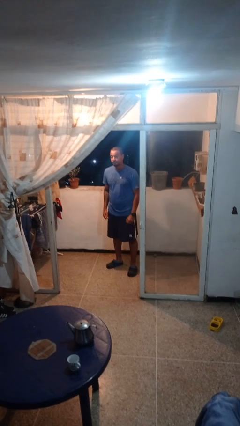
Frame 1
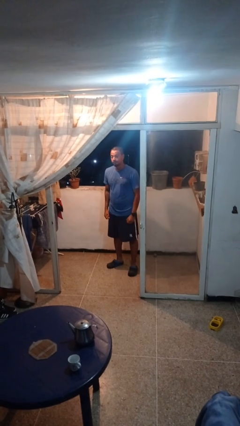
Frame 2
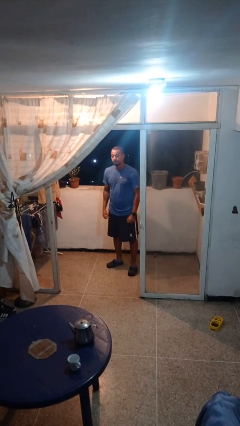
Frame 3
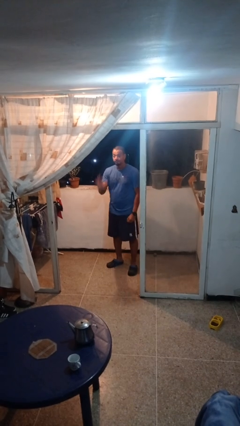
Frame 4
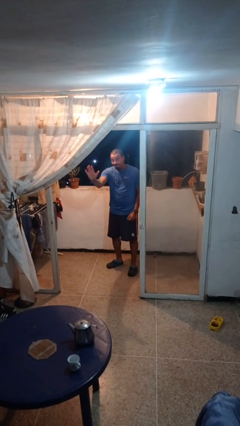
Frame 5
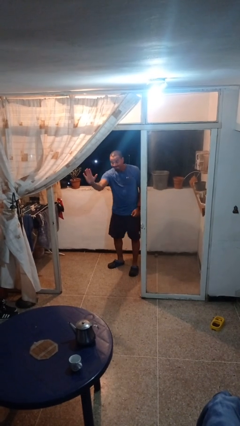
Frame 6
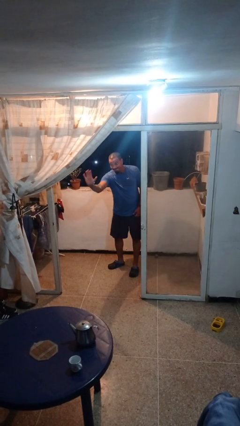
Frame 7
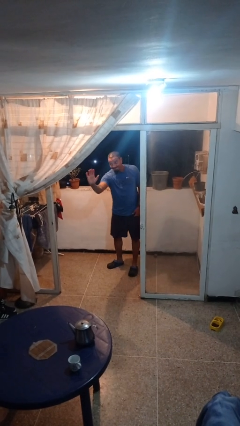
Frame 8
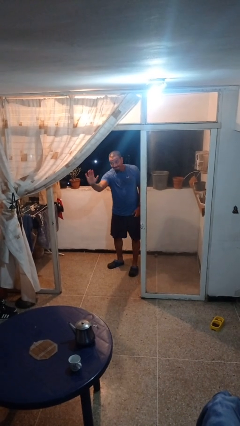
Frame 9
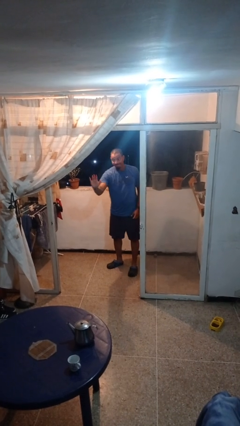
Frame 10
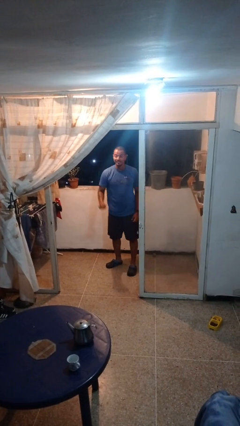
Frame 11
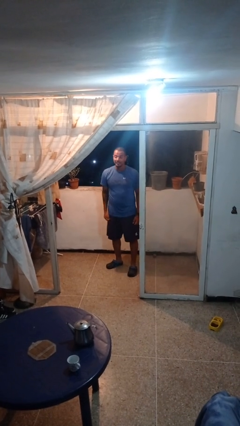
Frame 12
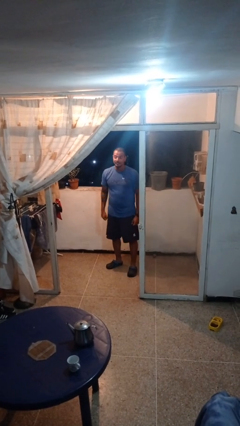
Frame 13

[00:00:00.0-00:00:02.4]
person gestures stop

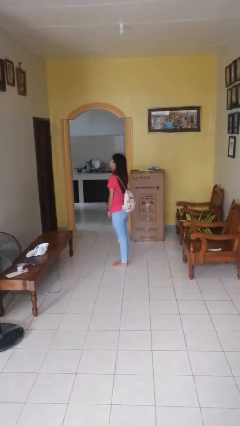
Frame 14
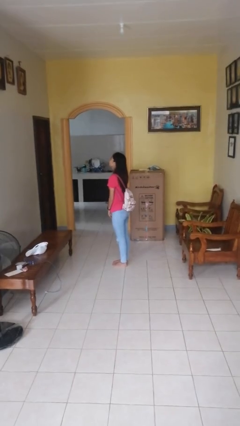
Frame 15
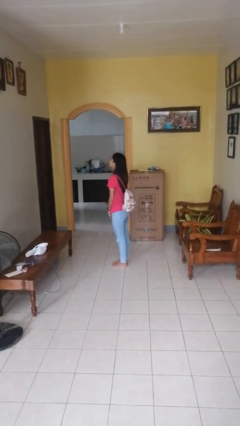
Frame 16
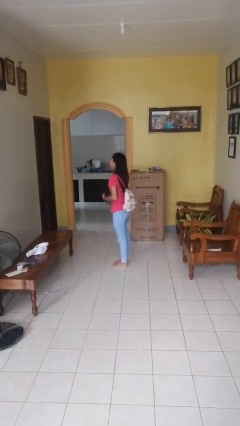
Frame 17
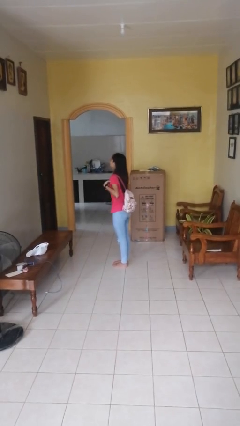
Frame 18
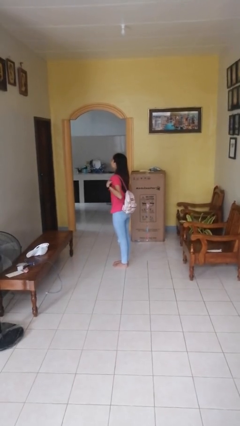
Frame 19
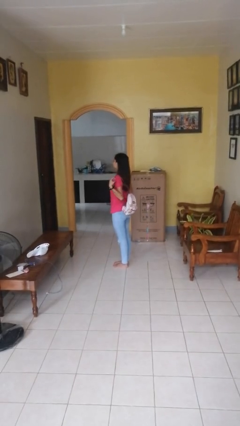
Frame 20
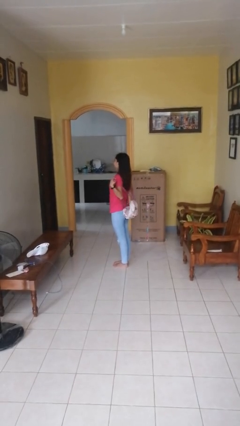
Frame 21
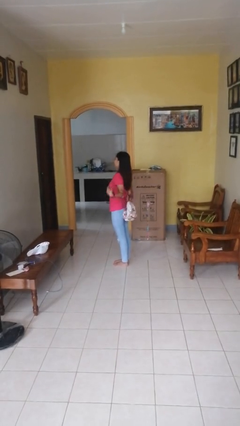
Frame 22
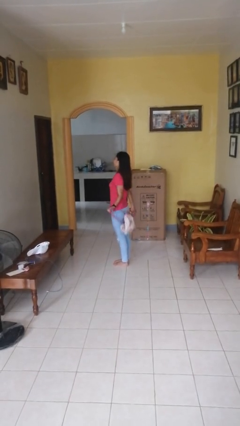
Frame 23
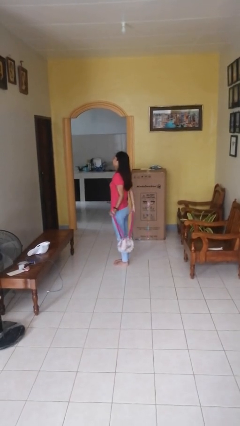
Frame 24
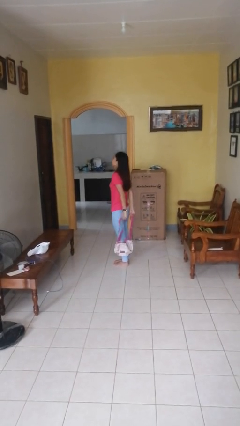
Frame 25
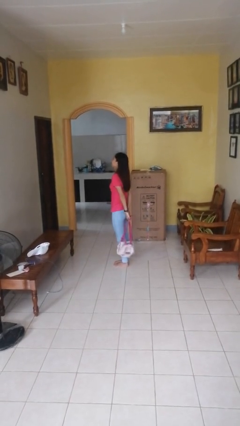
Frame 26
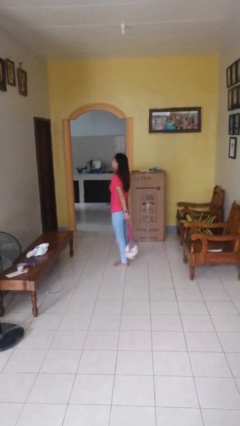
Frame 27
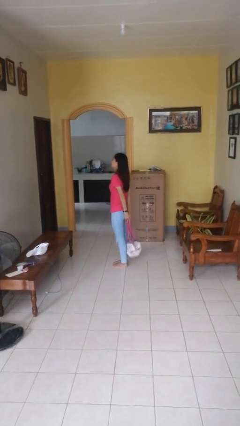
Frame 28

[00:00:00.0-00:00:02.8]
person takes off backpack

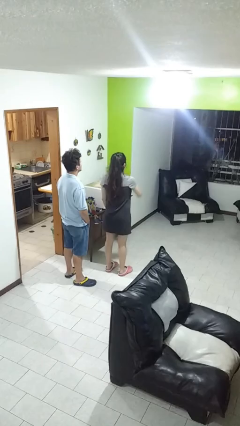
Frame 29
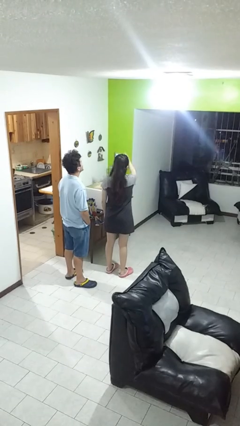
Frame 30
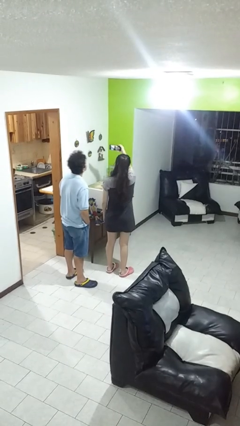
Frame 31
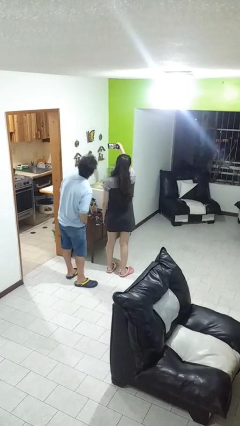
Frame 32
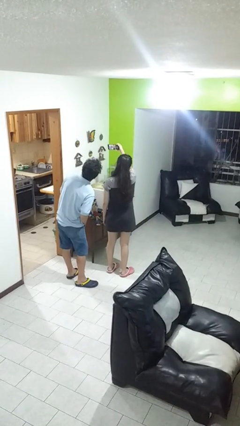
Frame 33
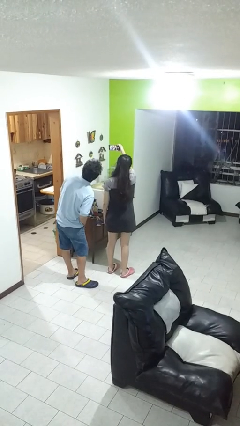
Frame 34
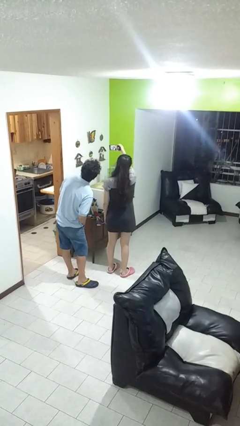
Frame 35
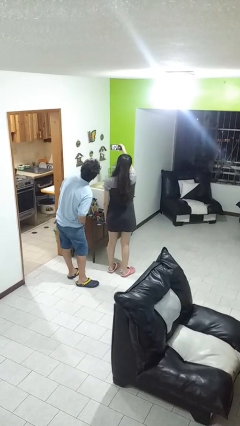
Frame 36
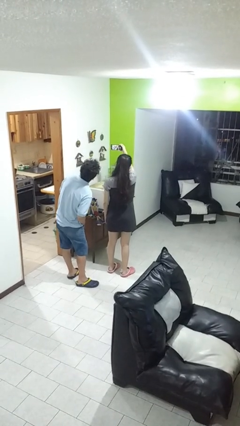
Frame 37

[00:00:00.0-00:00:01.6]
person takes selfie with person

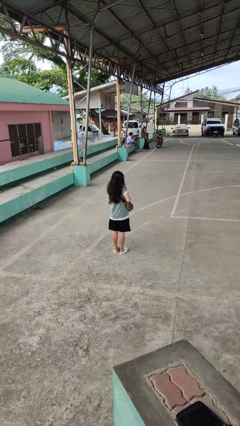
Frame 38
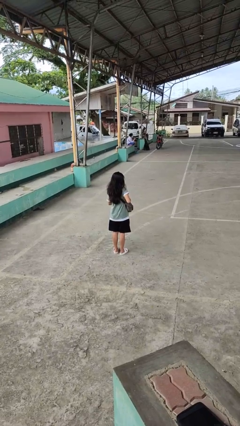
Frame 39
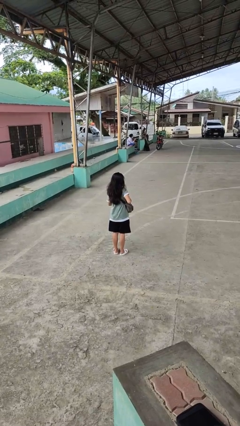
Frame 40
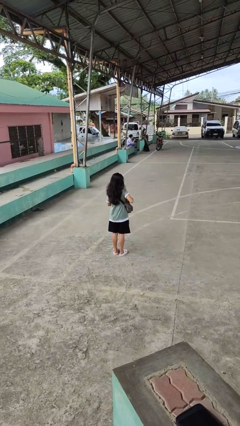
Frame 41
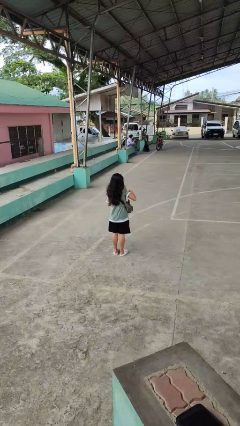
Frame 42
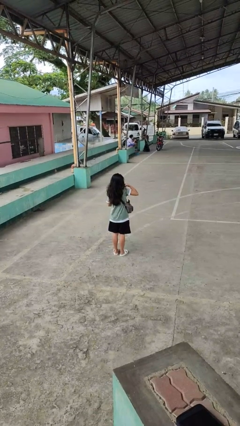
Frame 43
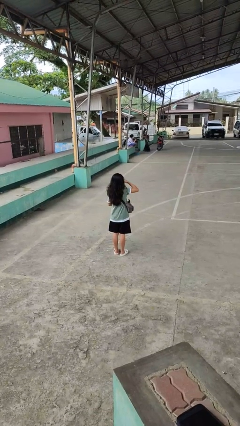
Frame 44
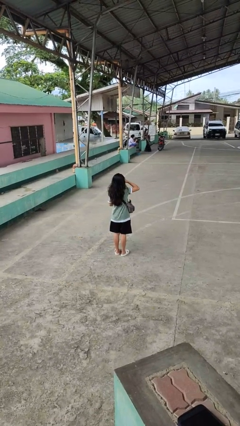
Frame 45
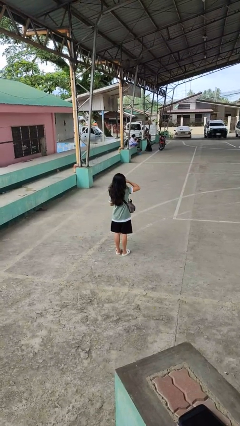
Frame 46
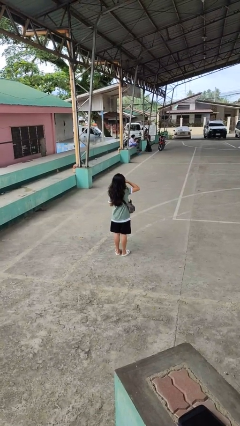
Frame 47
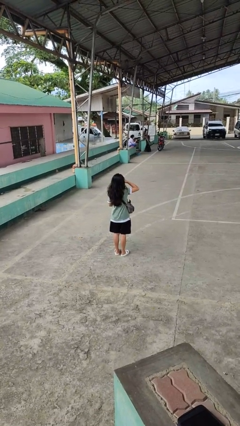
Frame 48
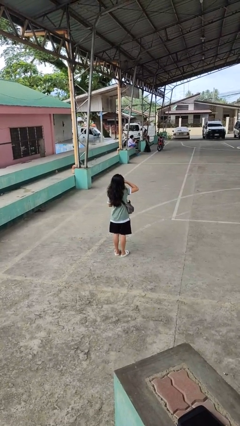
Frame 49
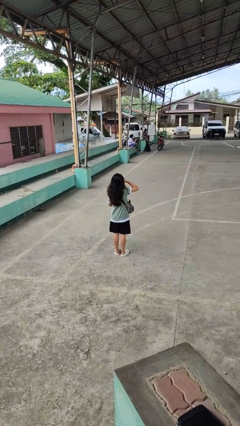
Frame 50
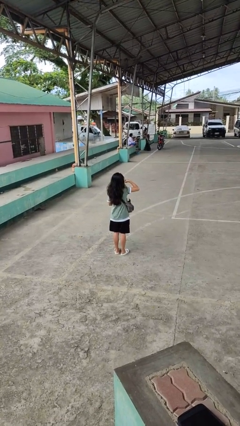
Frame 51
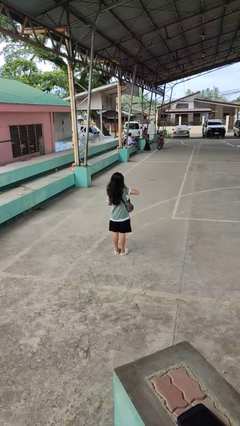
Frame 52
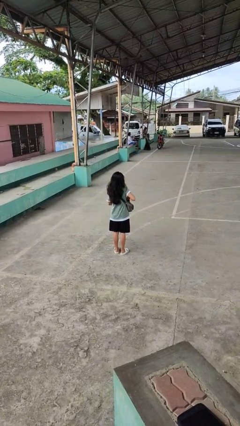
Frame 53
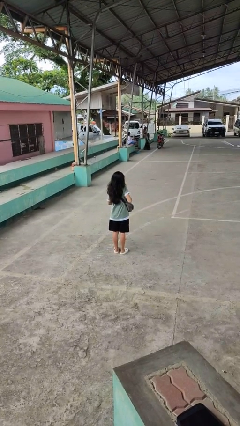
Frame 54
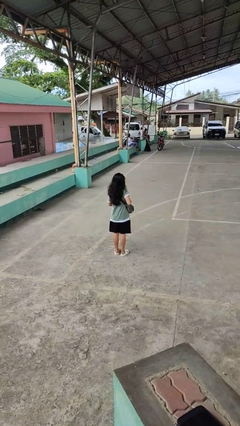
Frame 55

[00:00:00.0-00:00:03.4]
person eats snack from bag

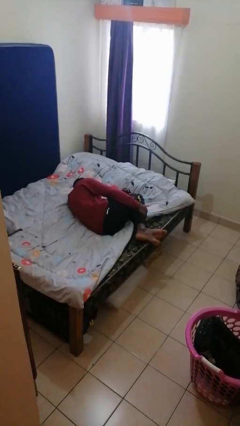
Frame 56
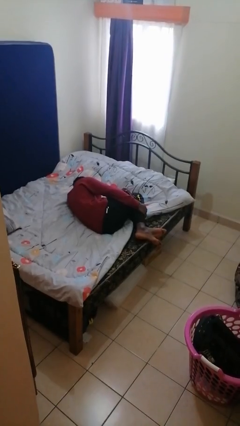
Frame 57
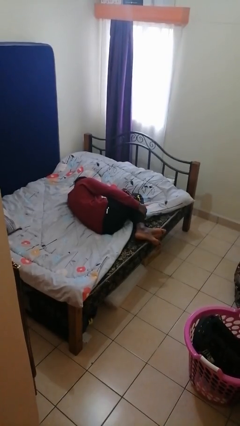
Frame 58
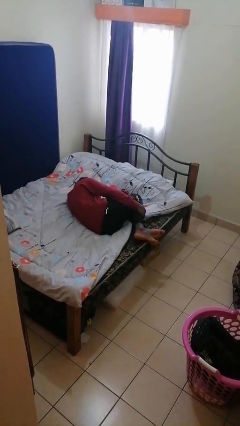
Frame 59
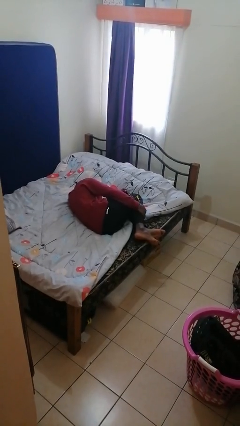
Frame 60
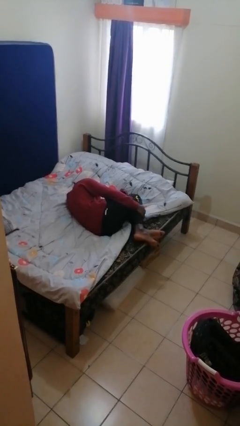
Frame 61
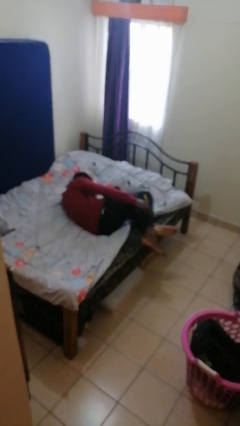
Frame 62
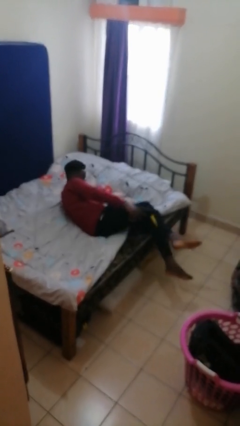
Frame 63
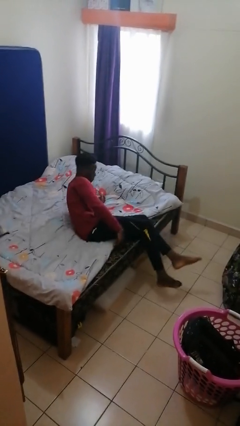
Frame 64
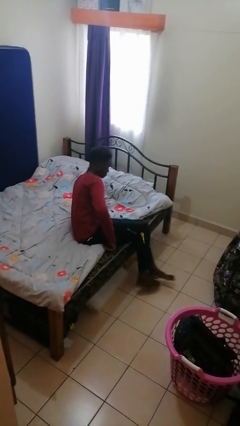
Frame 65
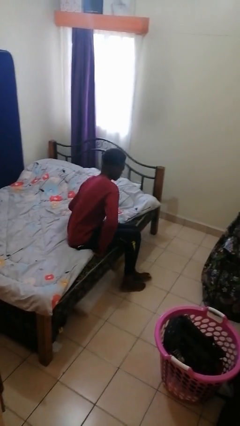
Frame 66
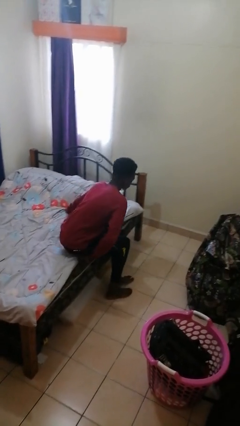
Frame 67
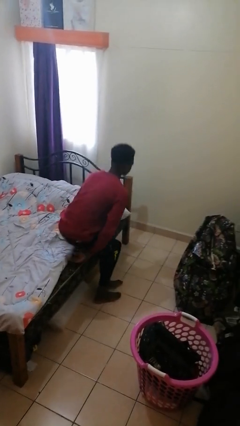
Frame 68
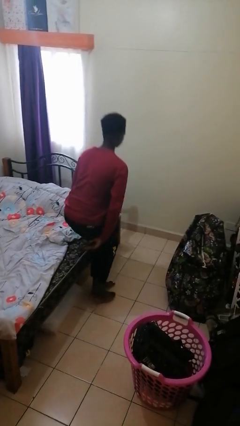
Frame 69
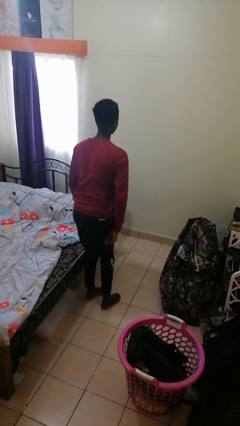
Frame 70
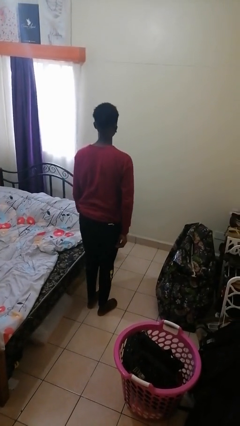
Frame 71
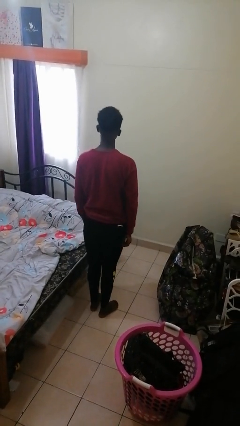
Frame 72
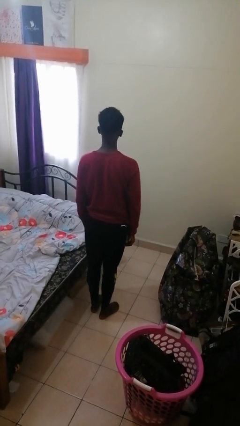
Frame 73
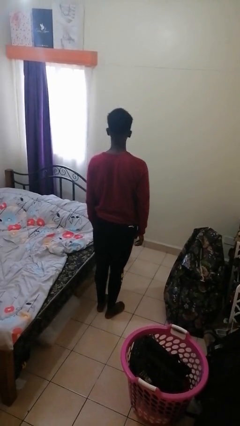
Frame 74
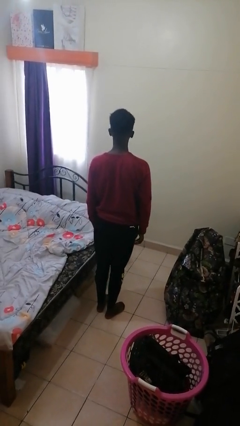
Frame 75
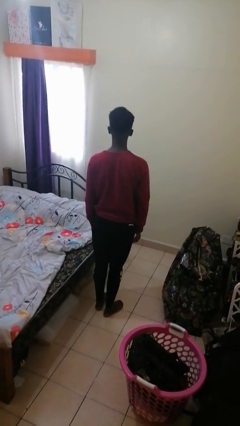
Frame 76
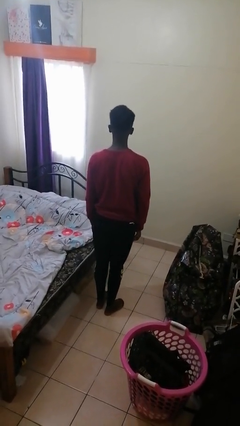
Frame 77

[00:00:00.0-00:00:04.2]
person stands up

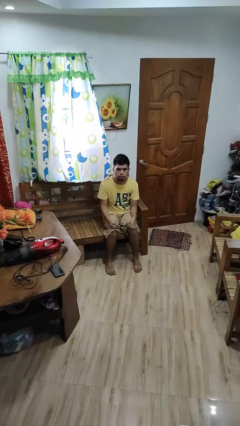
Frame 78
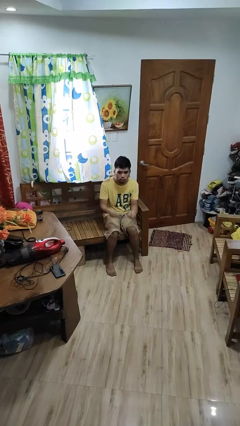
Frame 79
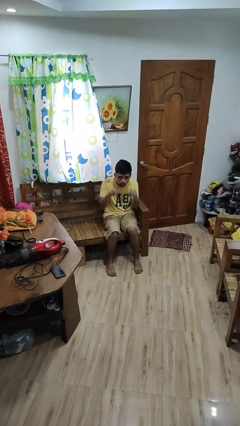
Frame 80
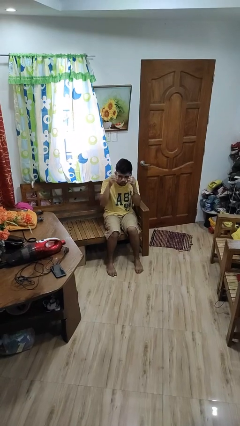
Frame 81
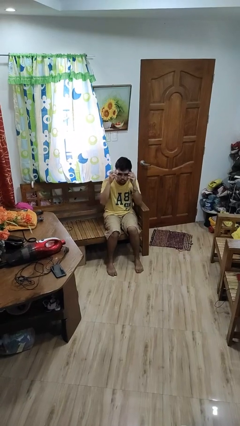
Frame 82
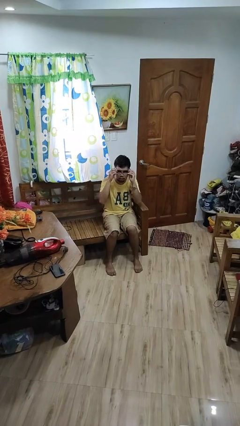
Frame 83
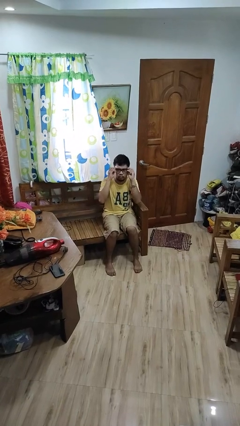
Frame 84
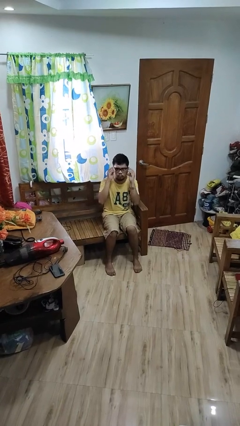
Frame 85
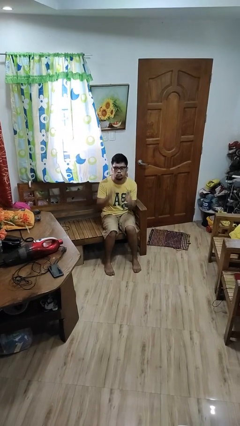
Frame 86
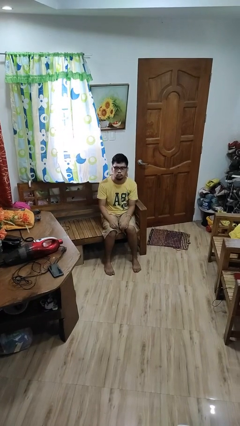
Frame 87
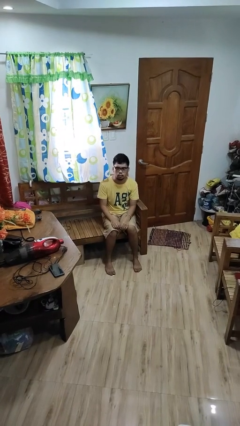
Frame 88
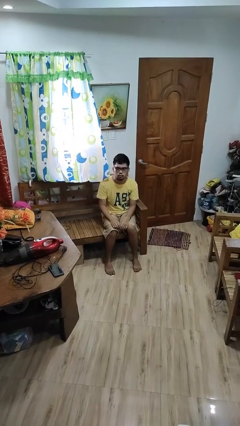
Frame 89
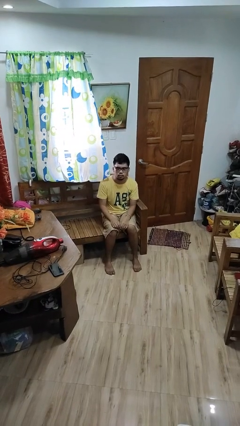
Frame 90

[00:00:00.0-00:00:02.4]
person puts on glasses

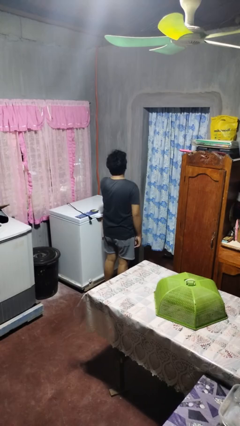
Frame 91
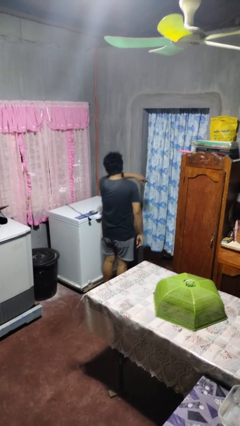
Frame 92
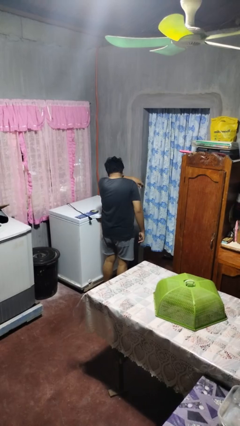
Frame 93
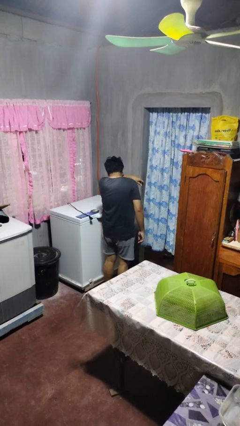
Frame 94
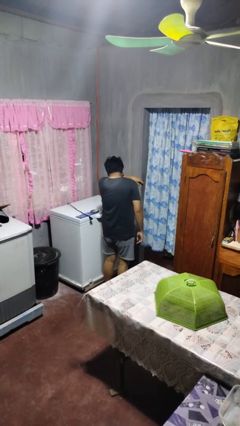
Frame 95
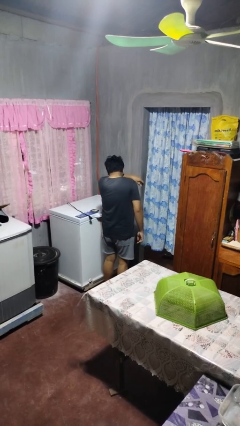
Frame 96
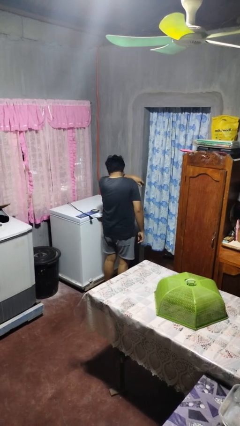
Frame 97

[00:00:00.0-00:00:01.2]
person sneezes into arm
